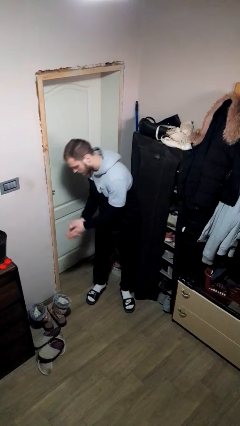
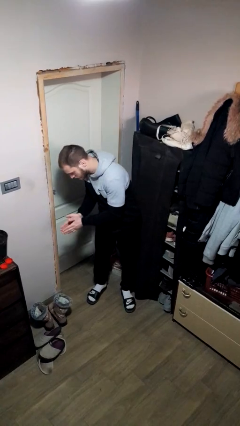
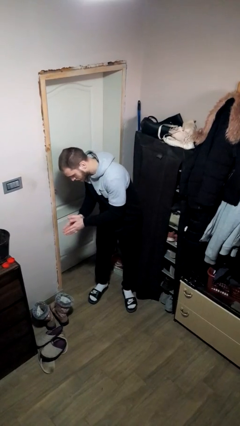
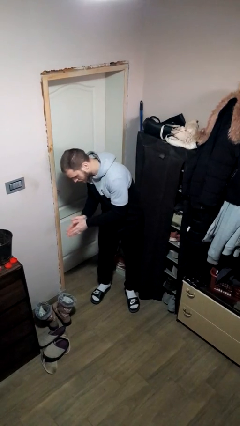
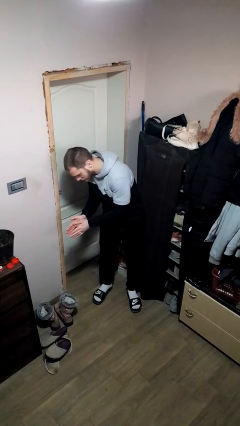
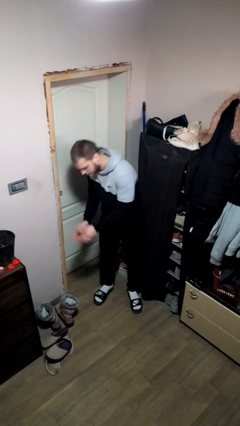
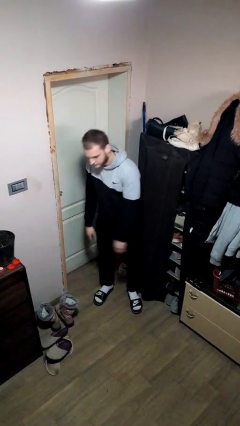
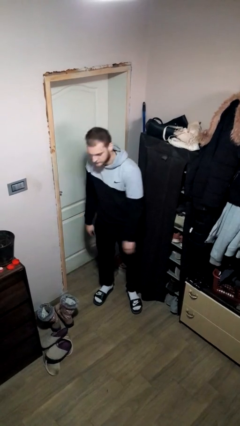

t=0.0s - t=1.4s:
person claps hands

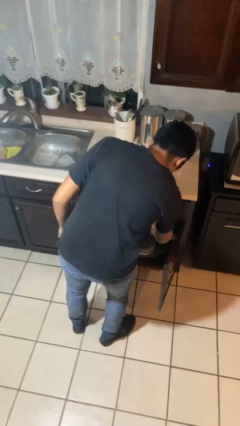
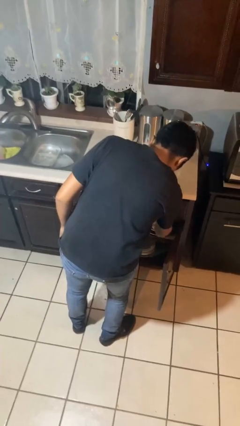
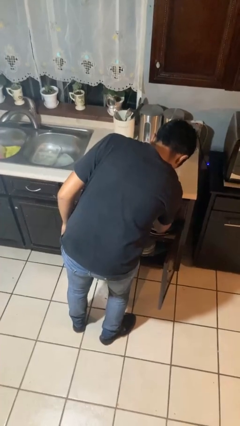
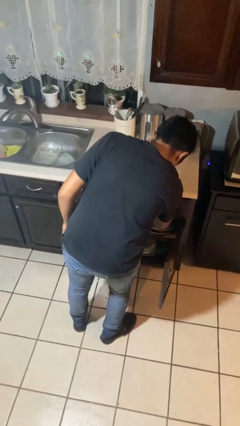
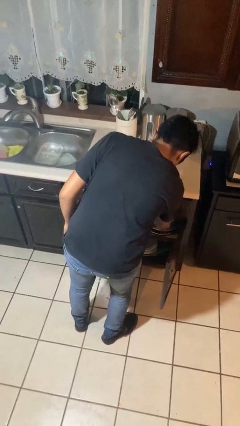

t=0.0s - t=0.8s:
person takes object from cabinet

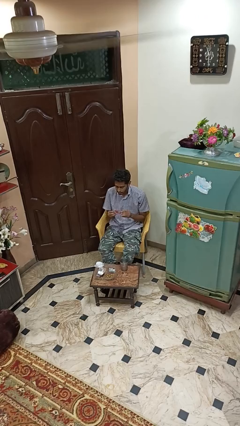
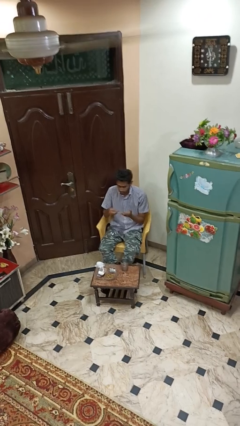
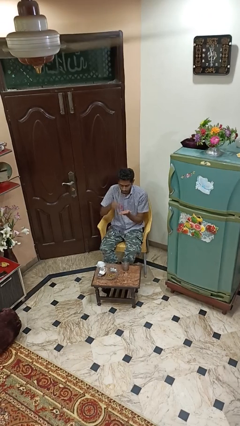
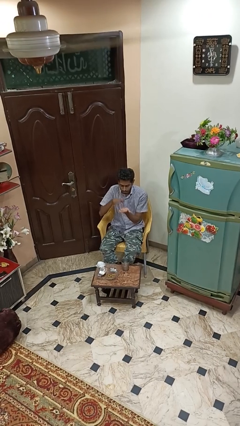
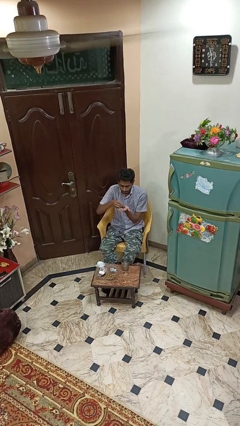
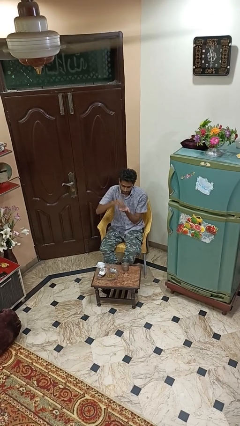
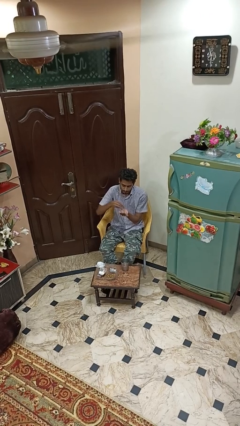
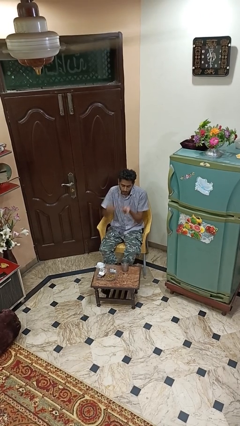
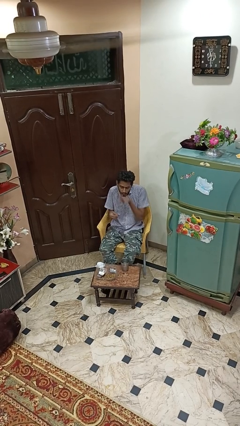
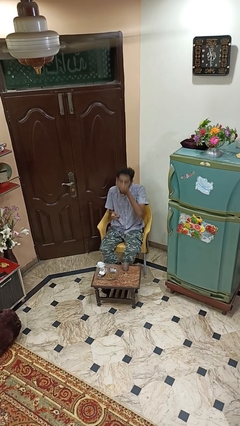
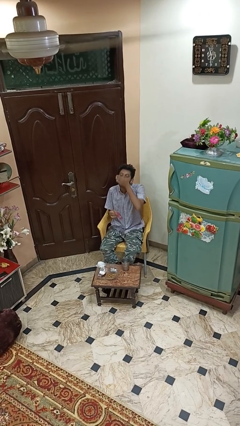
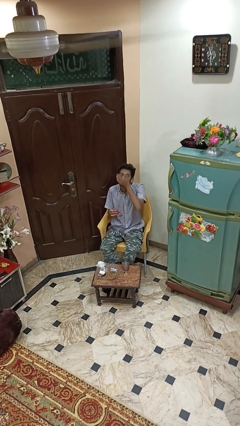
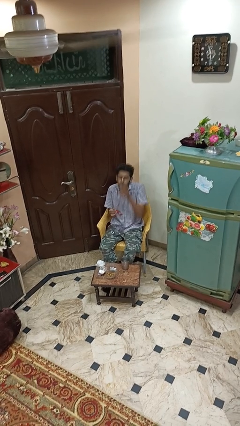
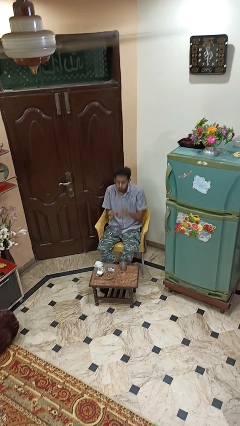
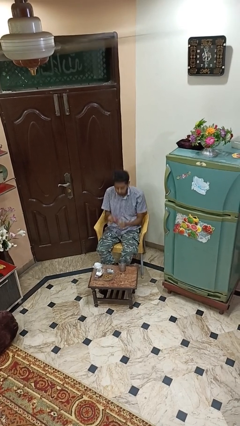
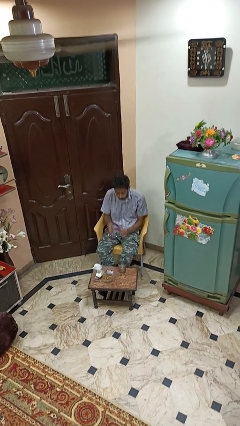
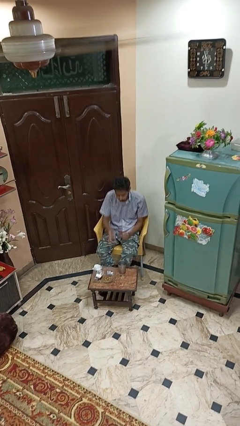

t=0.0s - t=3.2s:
person takes medicine pills

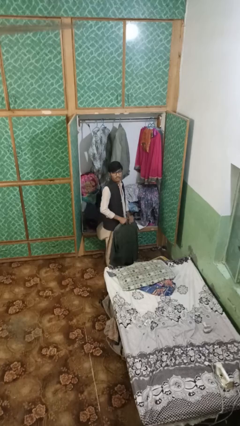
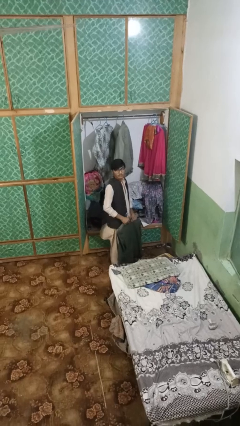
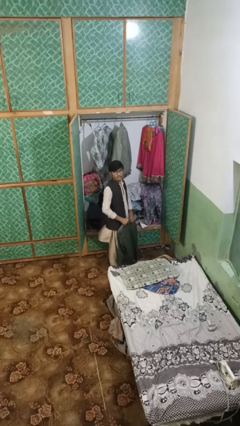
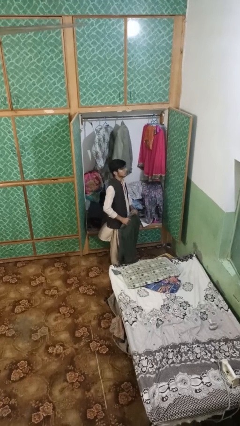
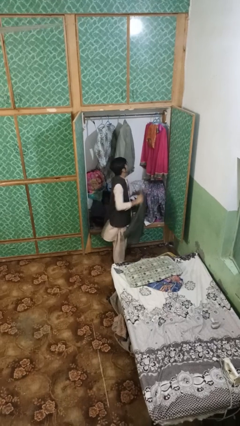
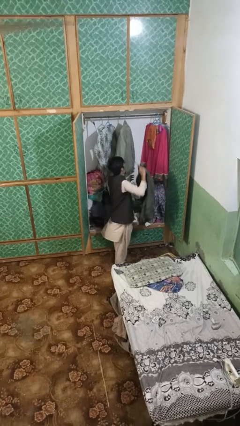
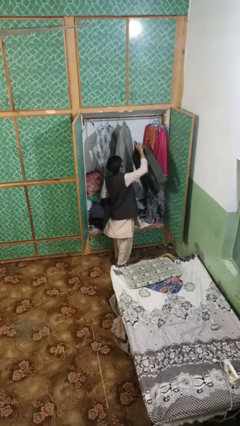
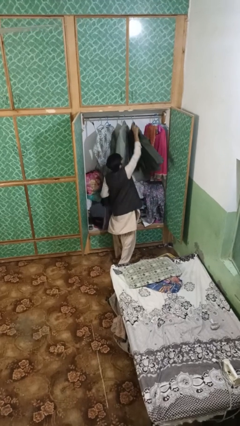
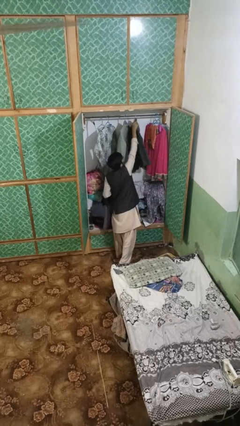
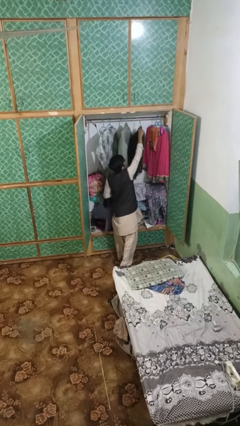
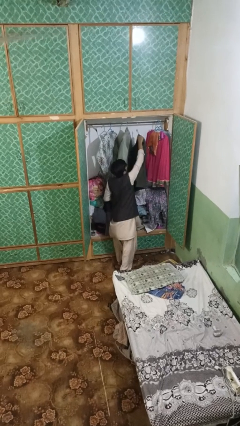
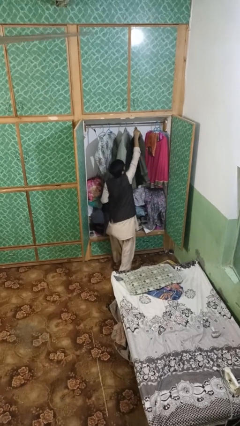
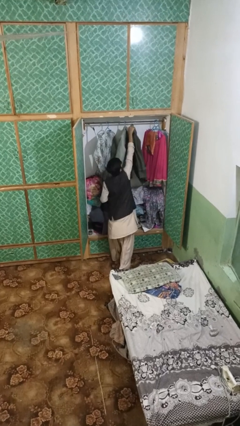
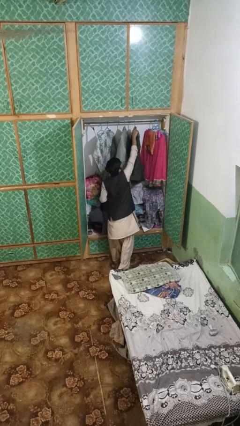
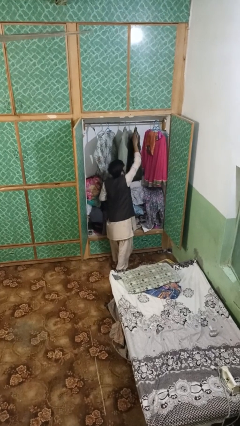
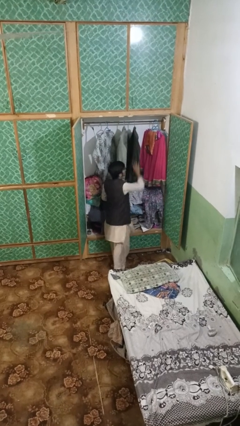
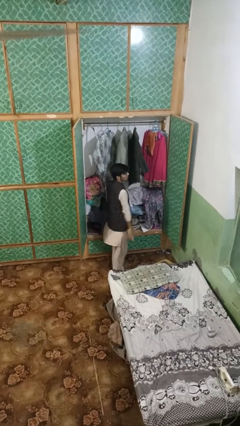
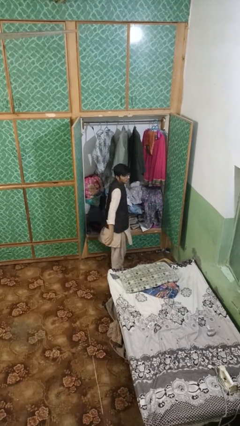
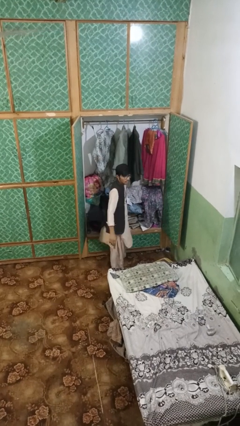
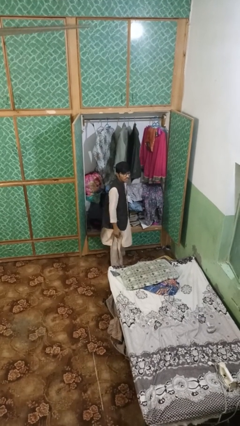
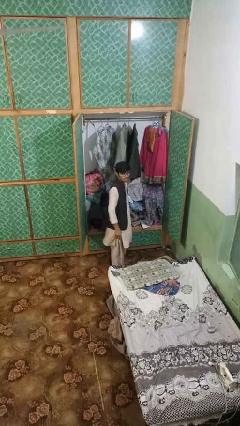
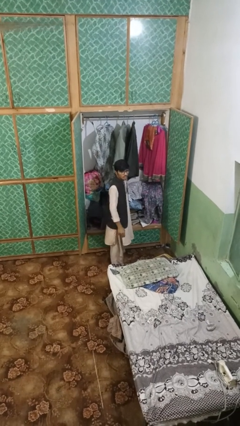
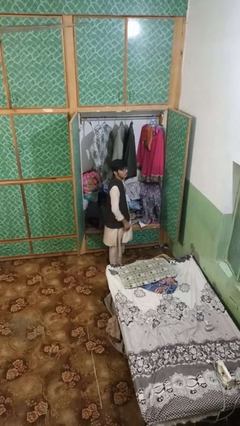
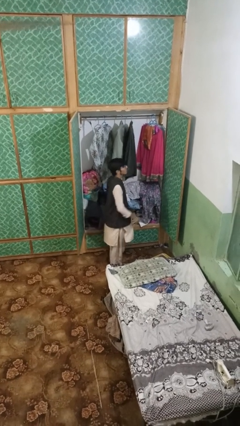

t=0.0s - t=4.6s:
person puts clothes into closet

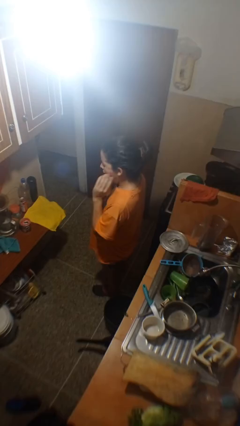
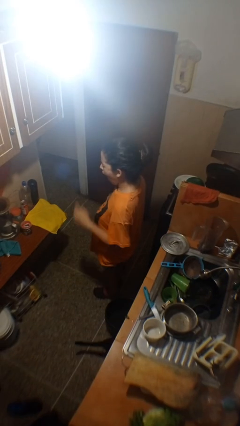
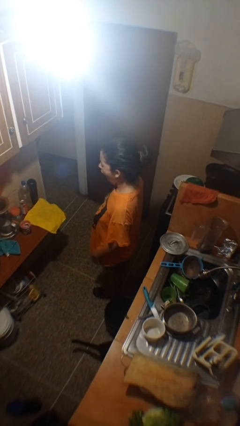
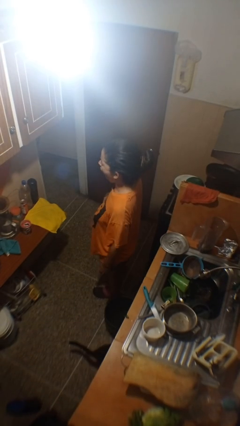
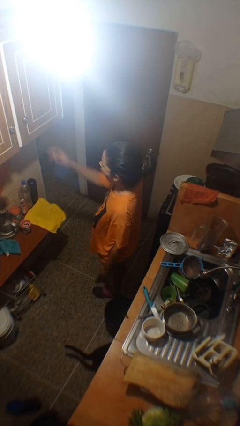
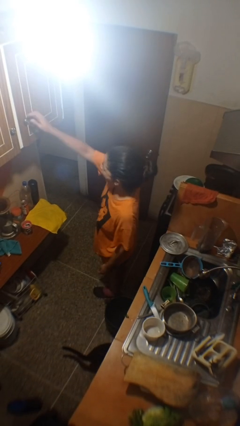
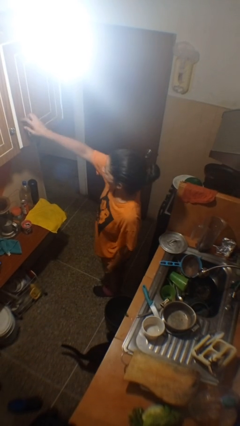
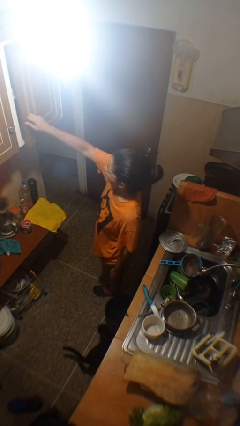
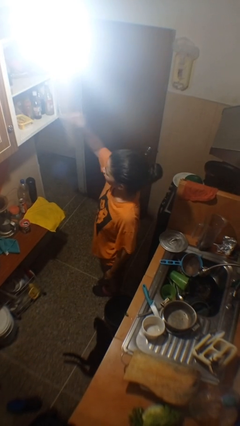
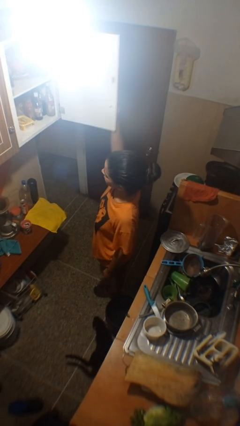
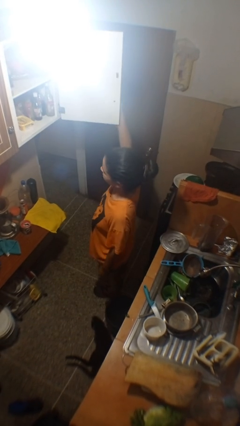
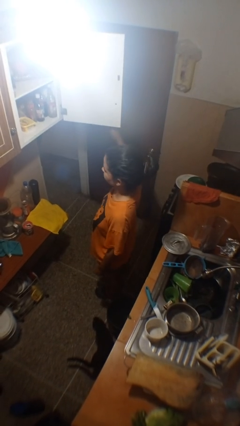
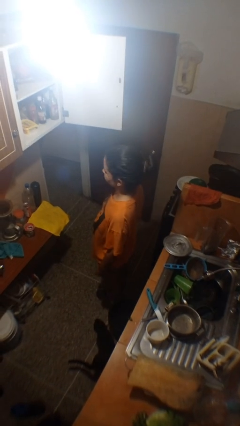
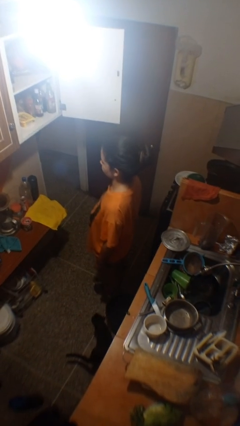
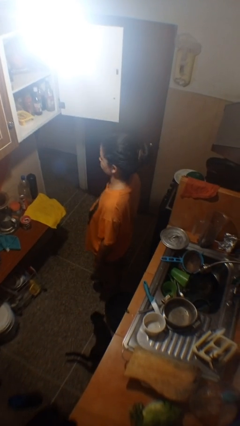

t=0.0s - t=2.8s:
person opens cabinet

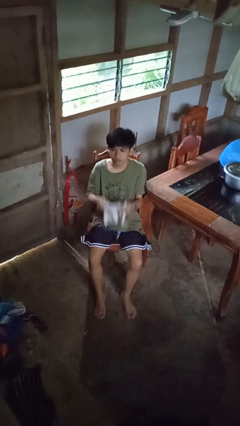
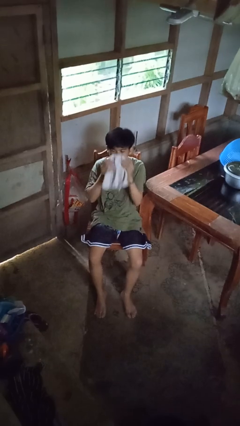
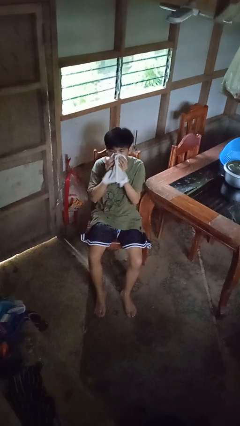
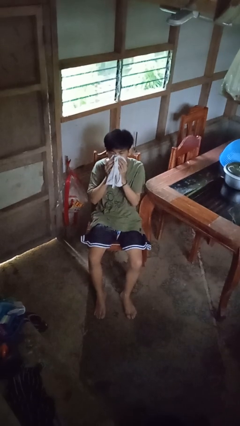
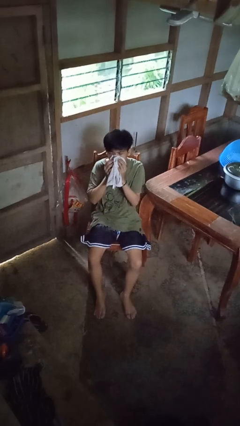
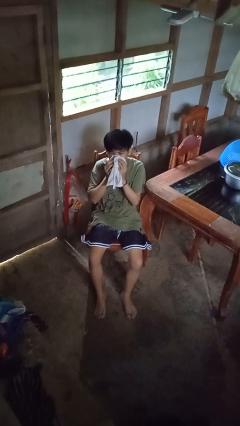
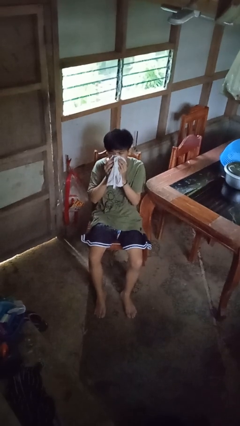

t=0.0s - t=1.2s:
person blows nose

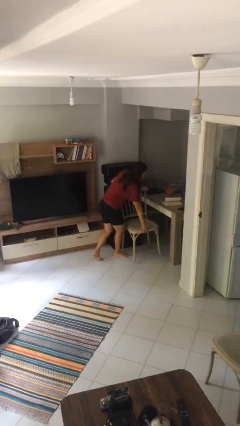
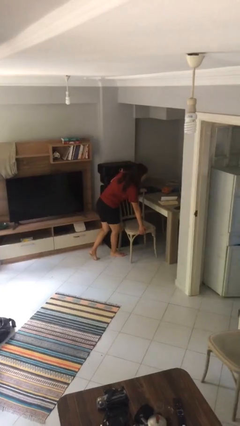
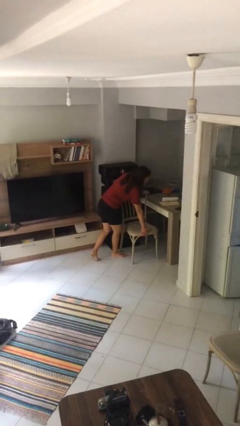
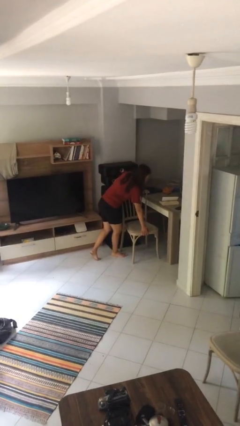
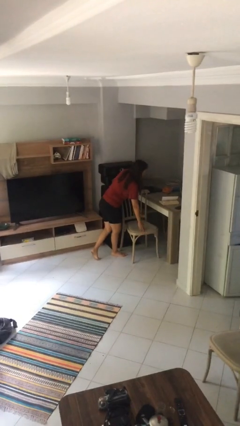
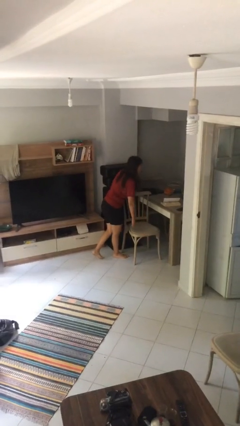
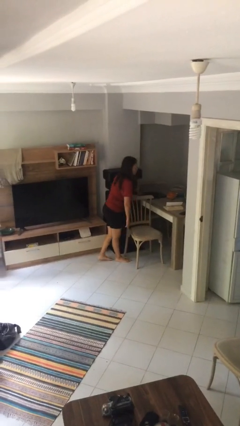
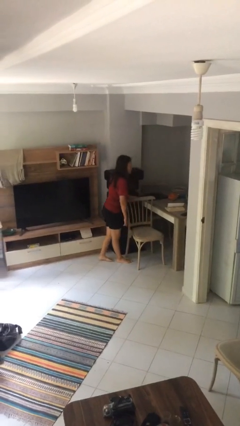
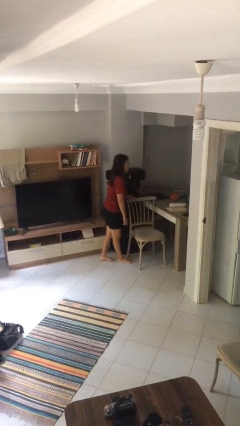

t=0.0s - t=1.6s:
person puts down object on floor

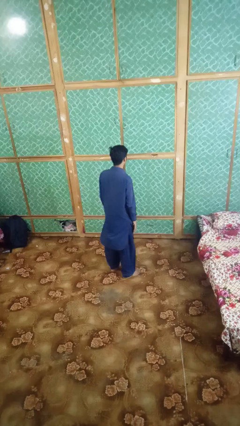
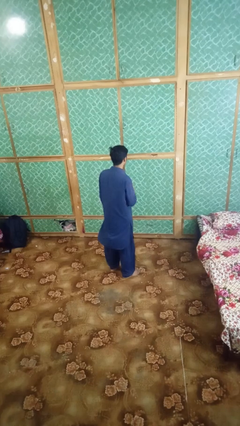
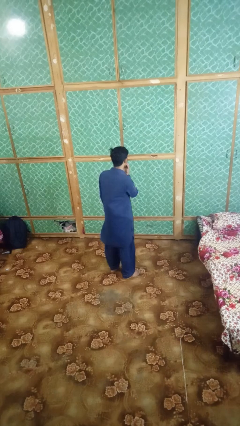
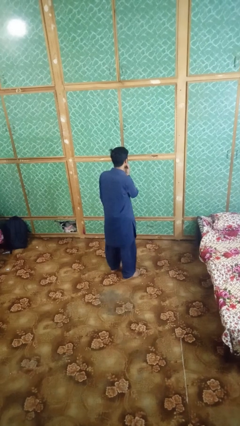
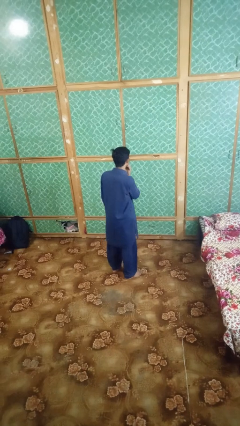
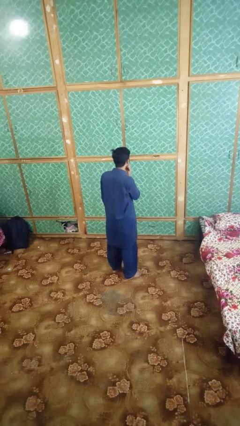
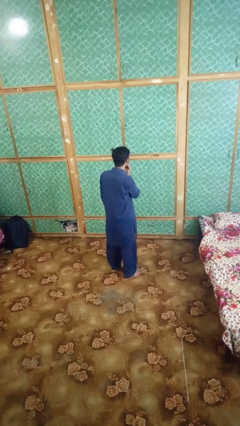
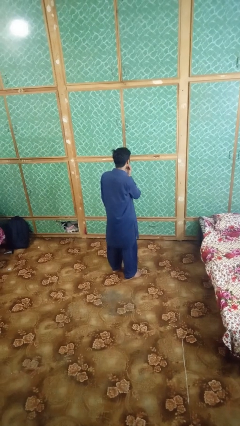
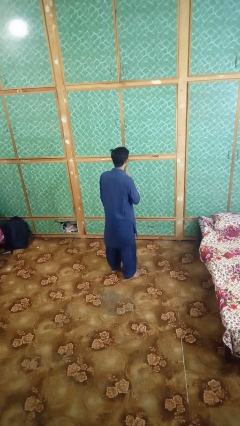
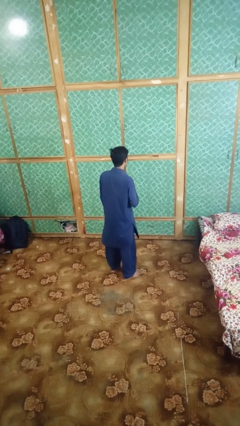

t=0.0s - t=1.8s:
person strokes chin
